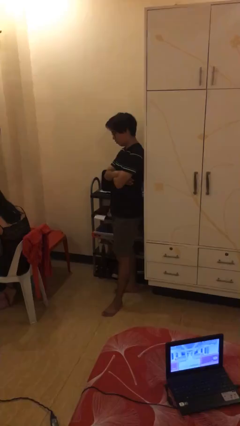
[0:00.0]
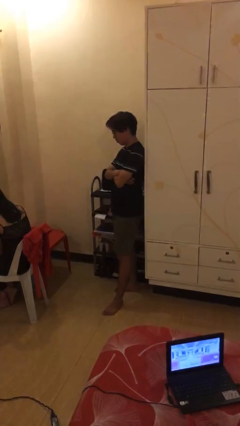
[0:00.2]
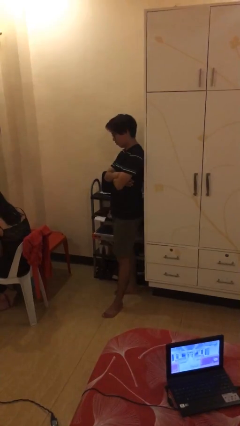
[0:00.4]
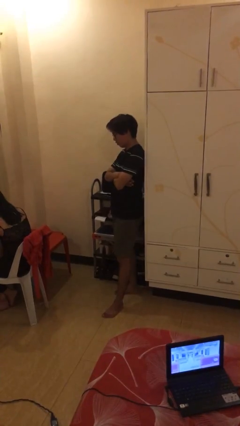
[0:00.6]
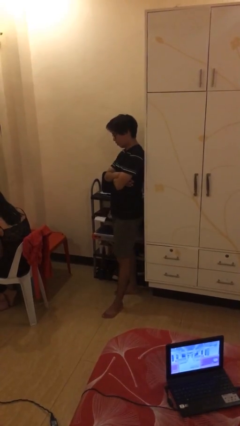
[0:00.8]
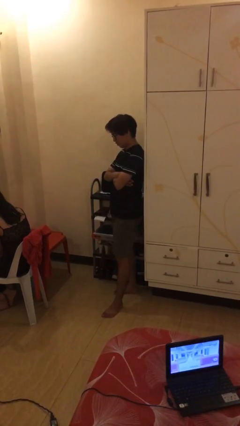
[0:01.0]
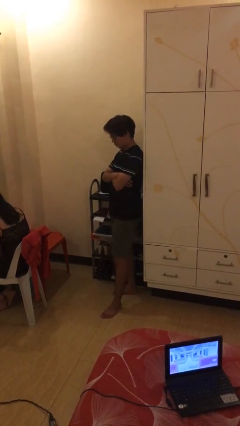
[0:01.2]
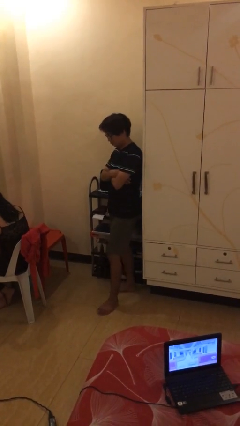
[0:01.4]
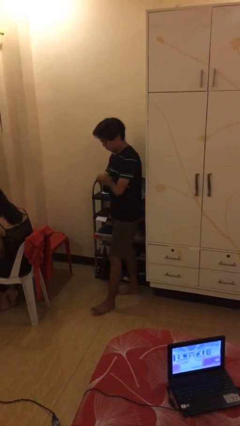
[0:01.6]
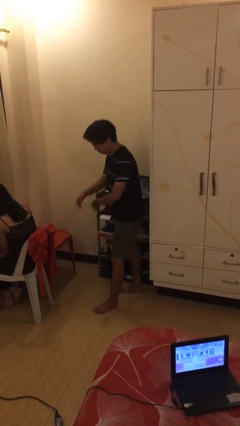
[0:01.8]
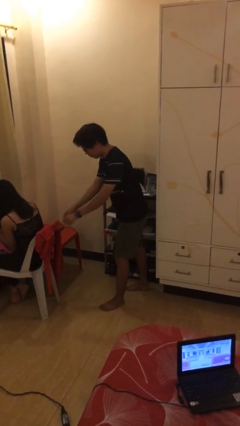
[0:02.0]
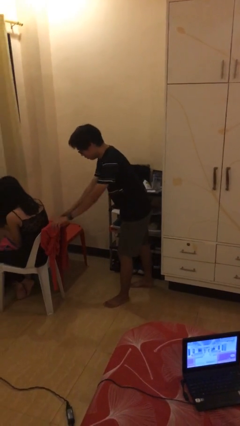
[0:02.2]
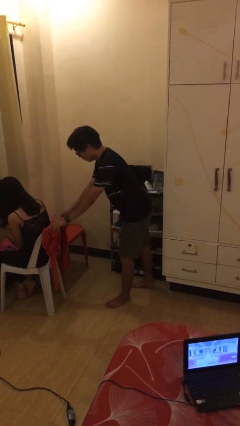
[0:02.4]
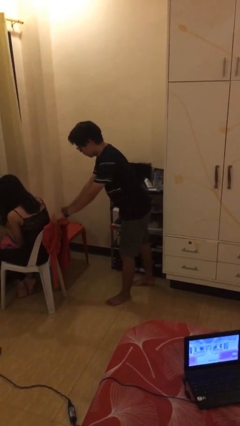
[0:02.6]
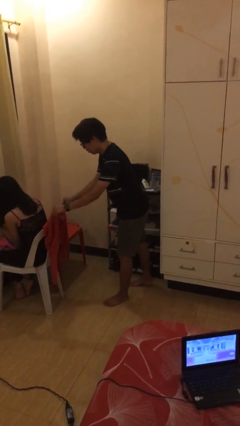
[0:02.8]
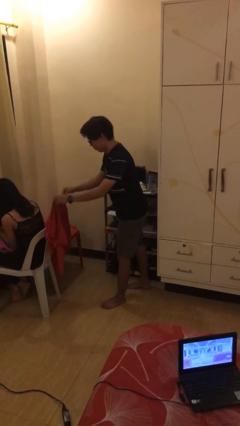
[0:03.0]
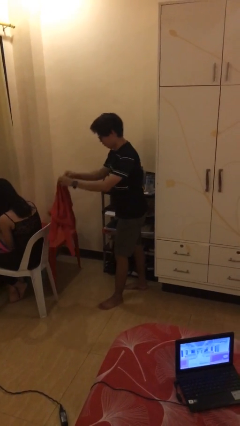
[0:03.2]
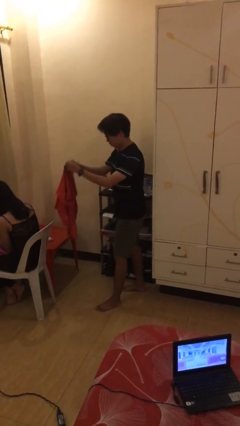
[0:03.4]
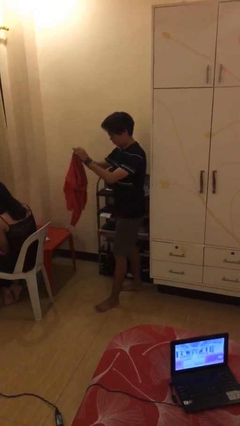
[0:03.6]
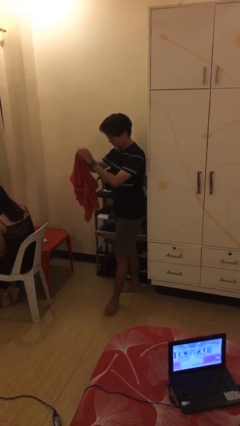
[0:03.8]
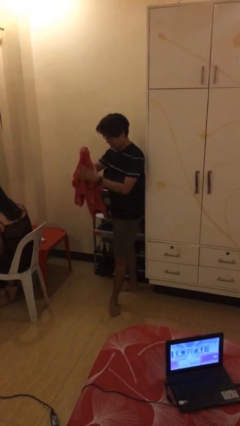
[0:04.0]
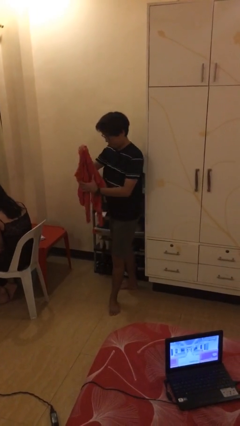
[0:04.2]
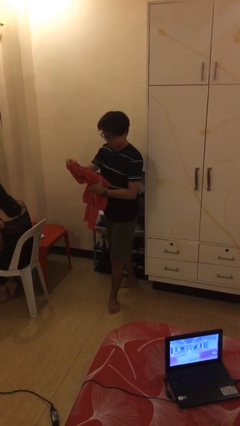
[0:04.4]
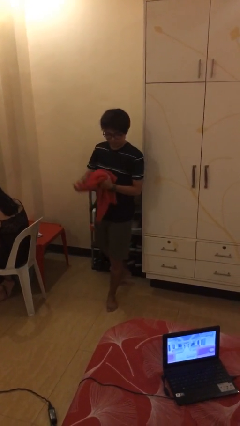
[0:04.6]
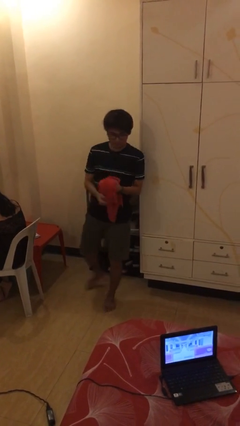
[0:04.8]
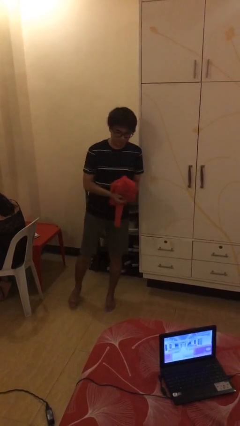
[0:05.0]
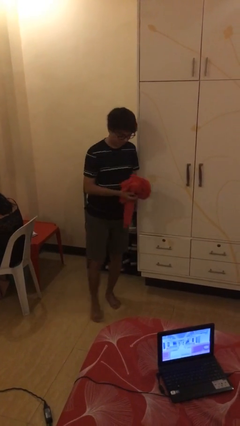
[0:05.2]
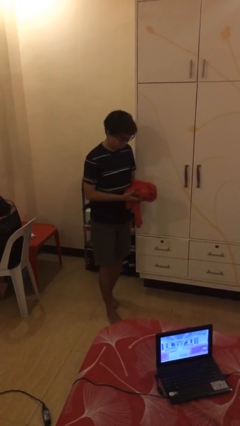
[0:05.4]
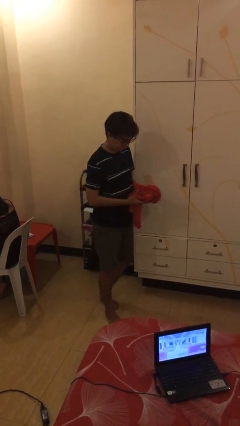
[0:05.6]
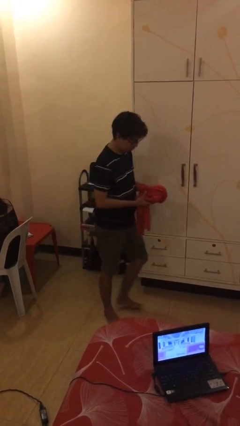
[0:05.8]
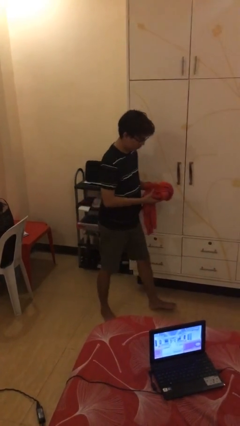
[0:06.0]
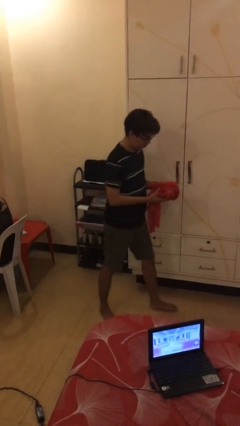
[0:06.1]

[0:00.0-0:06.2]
person steals object from person

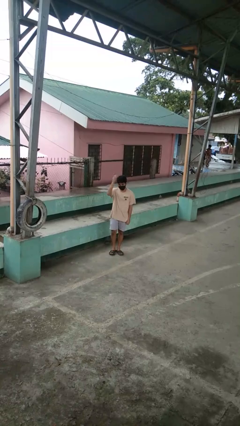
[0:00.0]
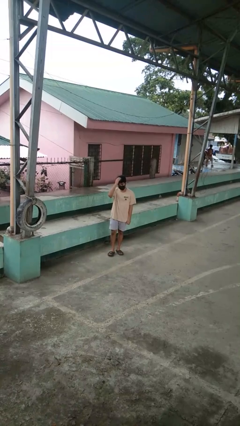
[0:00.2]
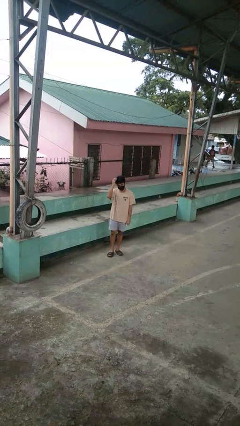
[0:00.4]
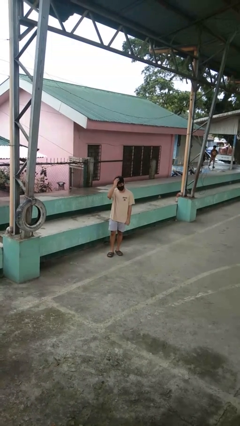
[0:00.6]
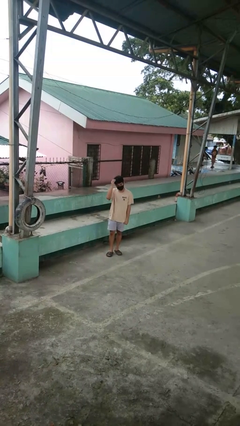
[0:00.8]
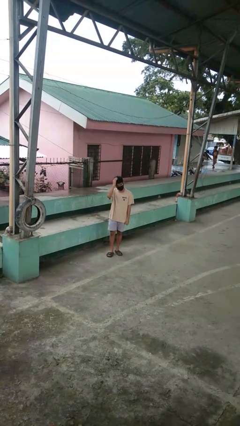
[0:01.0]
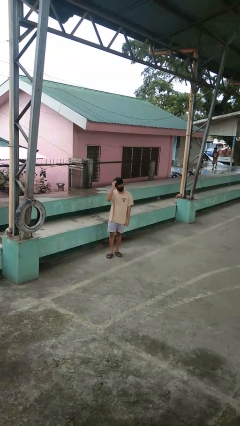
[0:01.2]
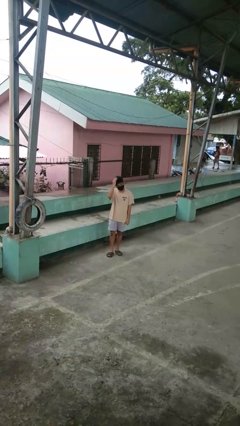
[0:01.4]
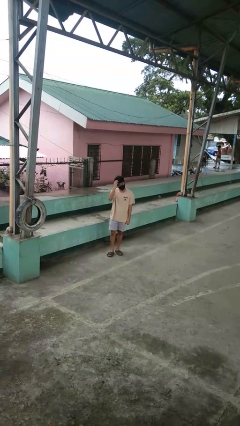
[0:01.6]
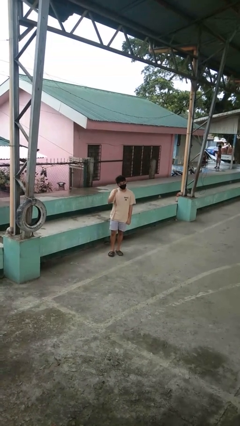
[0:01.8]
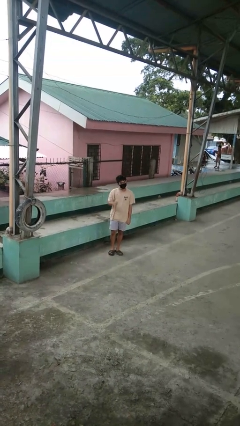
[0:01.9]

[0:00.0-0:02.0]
person pats head

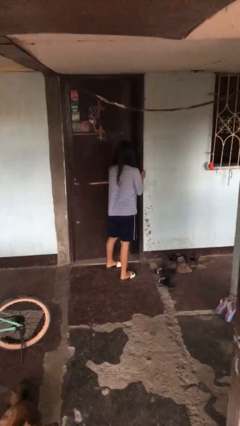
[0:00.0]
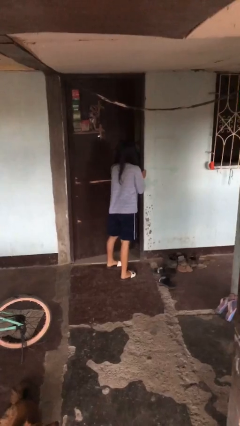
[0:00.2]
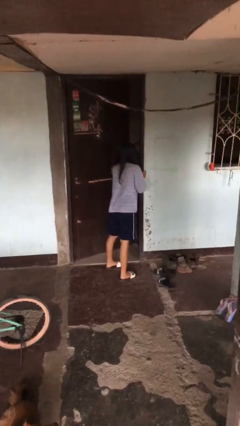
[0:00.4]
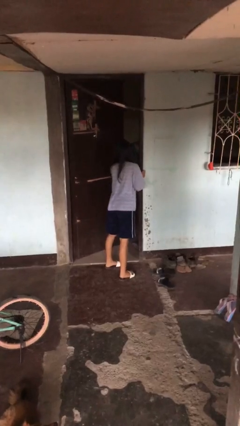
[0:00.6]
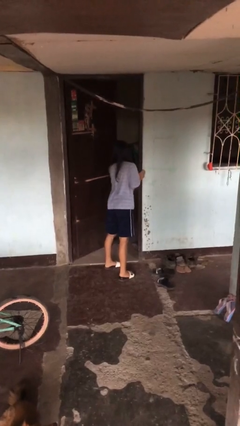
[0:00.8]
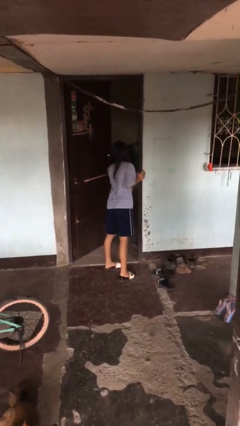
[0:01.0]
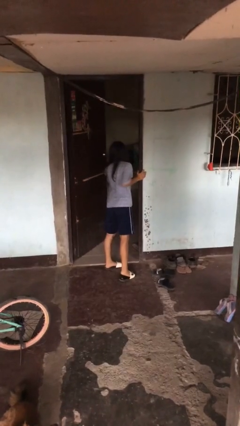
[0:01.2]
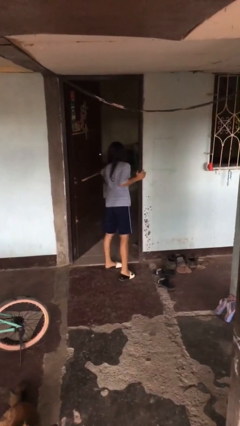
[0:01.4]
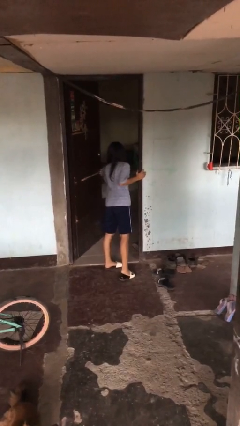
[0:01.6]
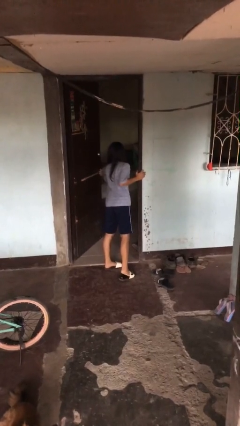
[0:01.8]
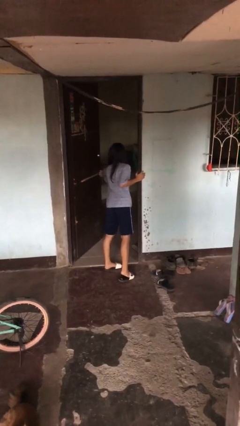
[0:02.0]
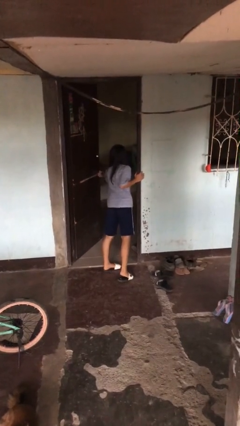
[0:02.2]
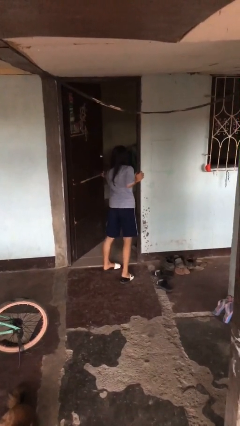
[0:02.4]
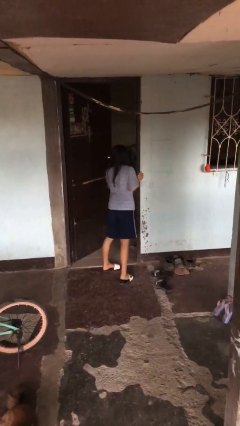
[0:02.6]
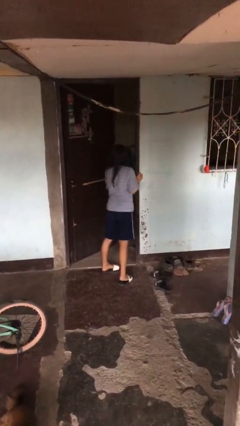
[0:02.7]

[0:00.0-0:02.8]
person opens facility door

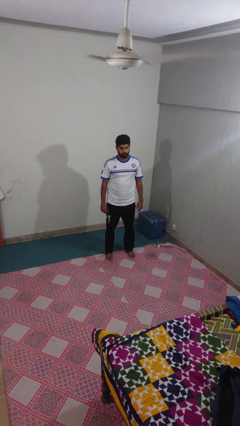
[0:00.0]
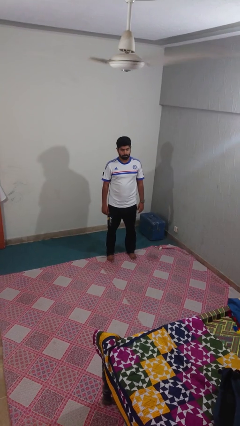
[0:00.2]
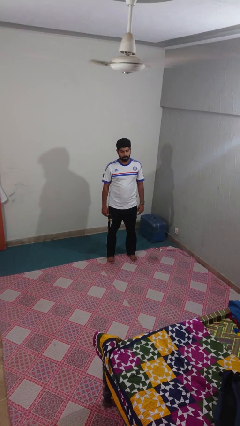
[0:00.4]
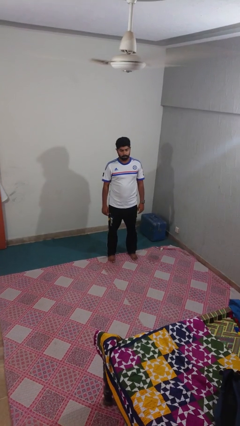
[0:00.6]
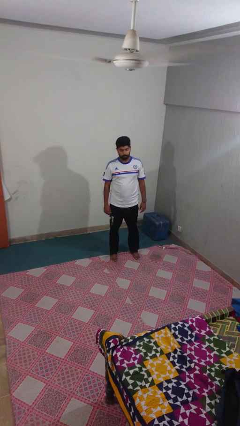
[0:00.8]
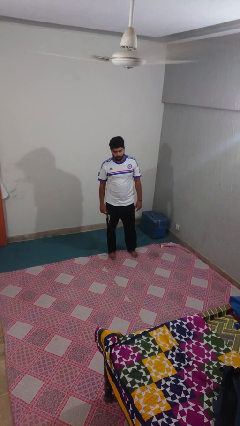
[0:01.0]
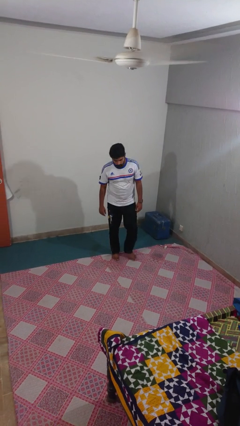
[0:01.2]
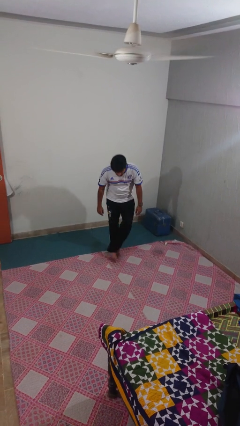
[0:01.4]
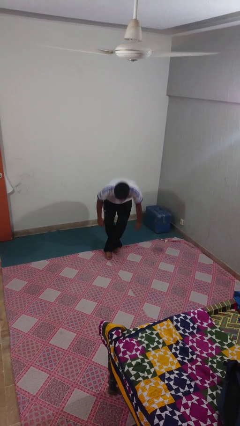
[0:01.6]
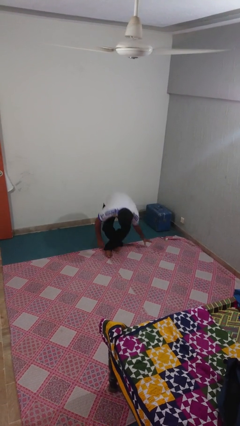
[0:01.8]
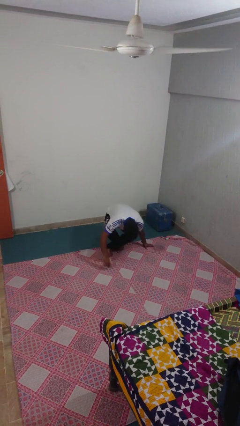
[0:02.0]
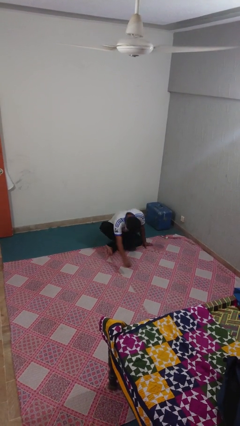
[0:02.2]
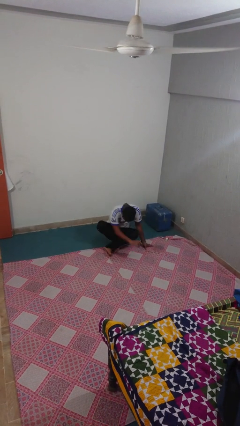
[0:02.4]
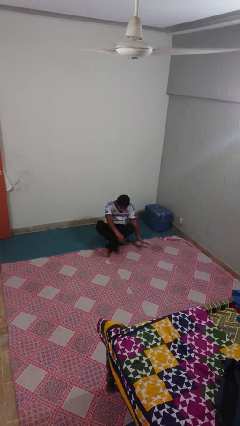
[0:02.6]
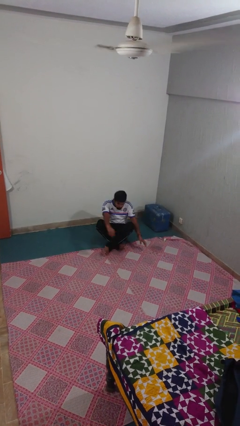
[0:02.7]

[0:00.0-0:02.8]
person sits crisscross

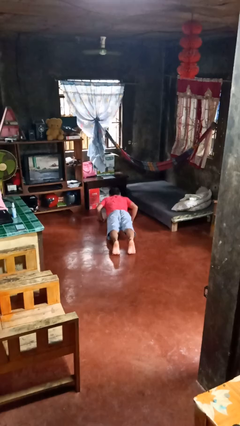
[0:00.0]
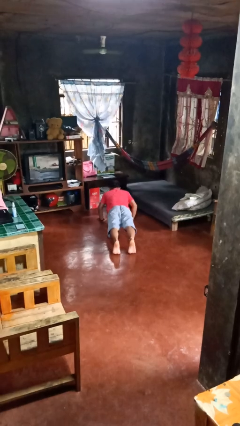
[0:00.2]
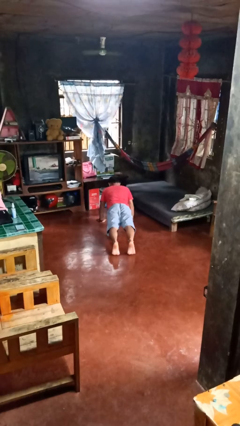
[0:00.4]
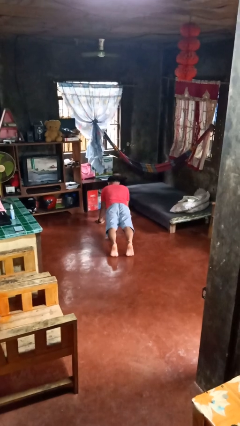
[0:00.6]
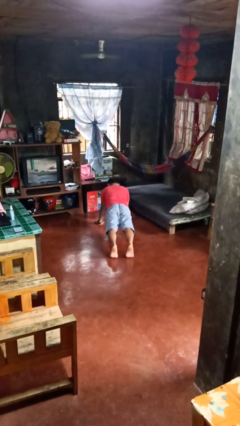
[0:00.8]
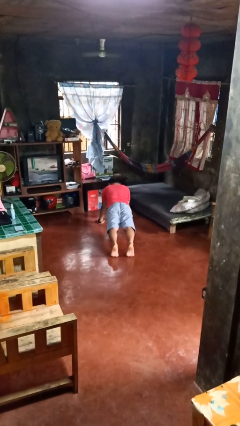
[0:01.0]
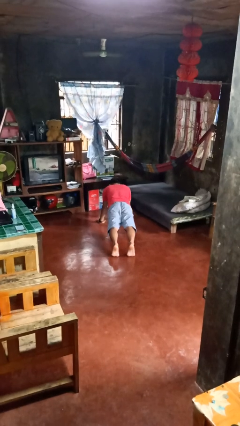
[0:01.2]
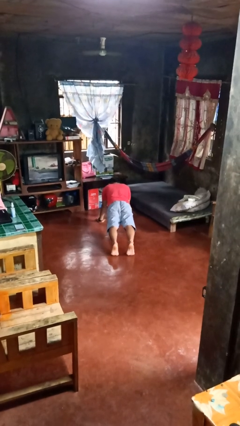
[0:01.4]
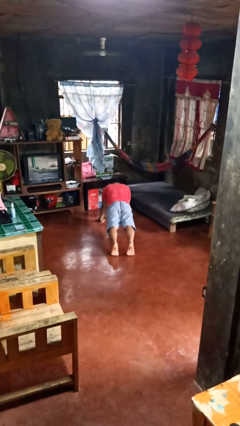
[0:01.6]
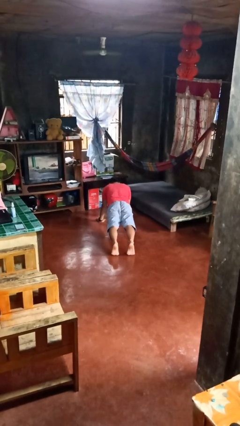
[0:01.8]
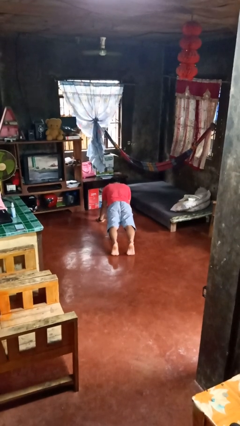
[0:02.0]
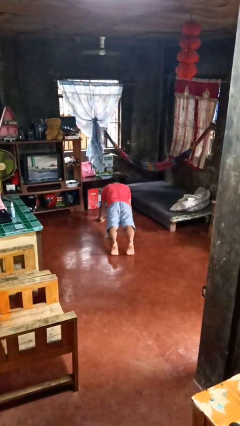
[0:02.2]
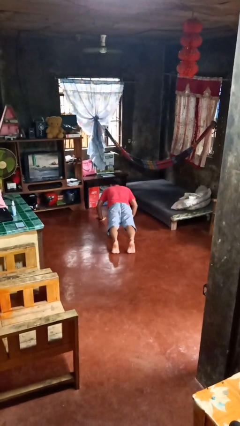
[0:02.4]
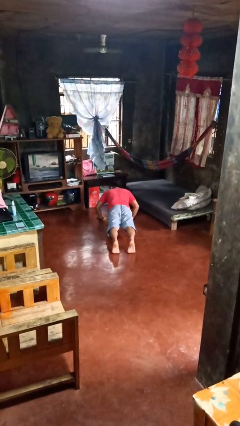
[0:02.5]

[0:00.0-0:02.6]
person exercises with pushup

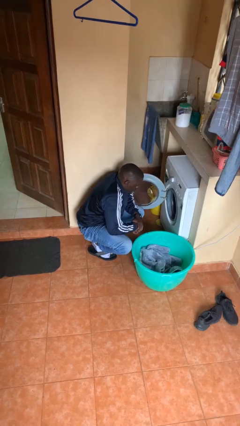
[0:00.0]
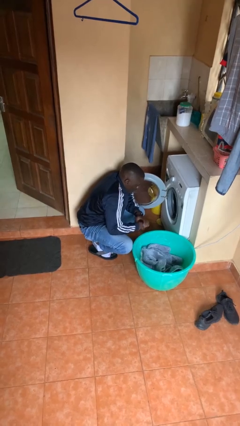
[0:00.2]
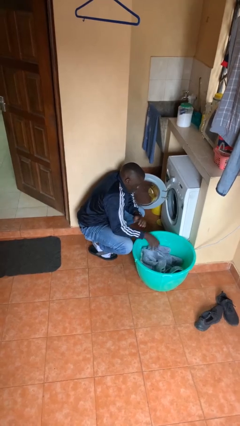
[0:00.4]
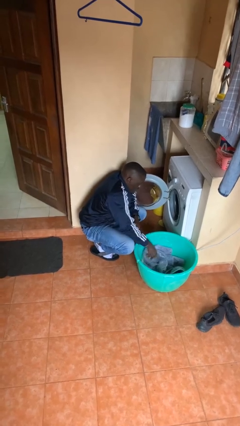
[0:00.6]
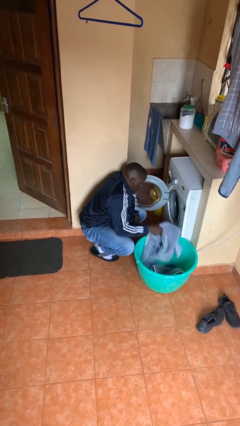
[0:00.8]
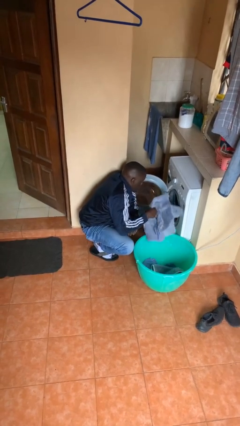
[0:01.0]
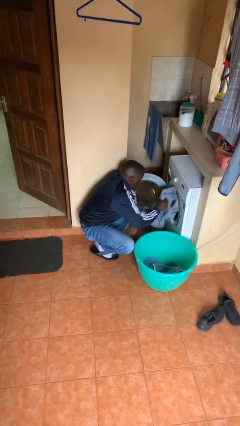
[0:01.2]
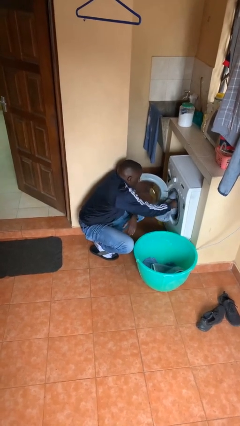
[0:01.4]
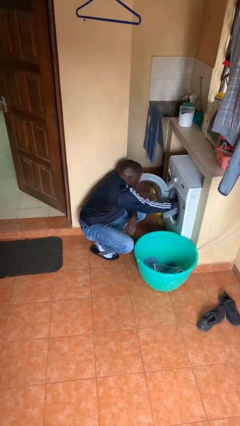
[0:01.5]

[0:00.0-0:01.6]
person loads clotheswasher
